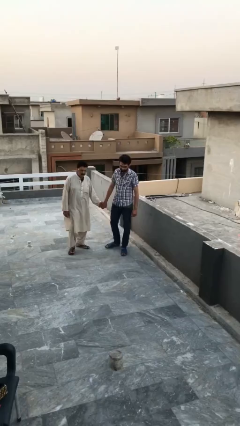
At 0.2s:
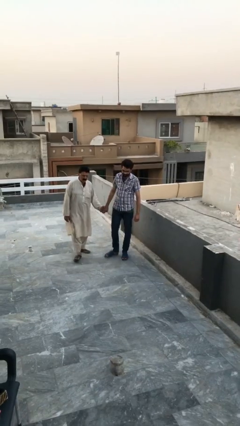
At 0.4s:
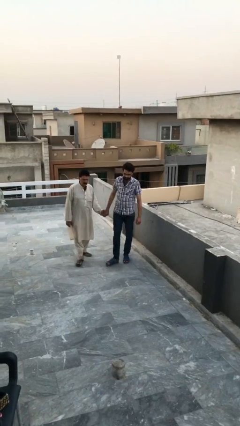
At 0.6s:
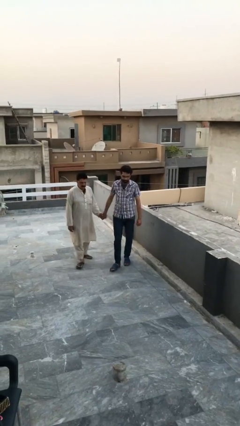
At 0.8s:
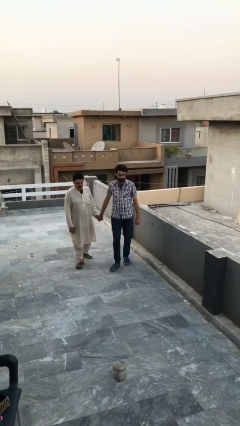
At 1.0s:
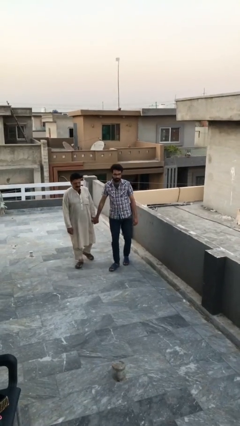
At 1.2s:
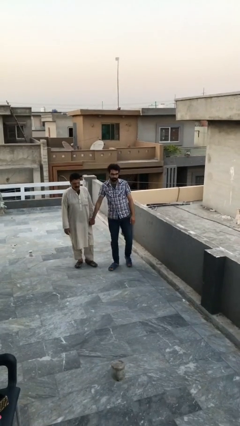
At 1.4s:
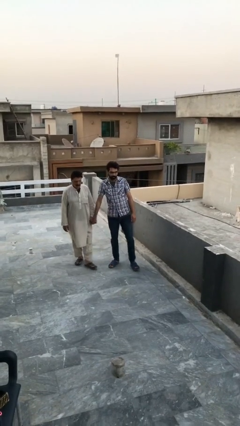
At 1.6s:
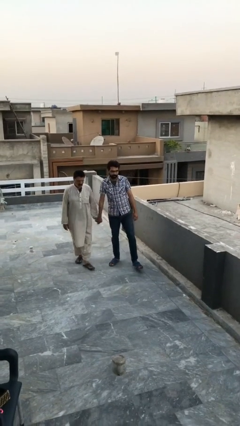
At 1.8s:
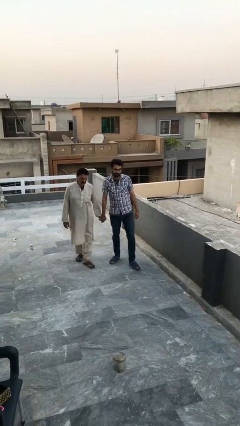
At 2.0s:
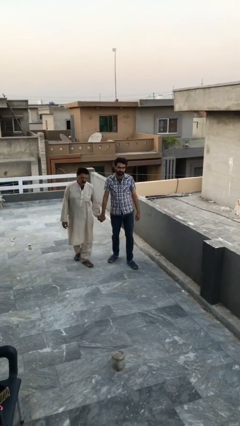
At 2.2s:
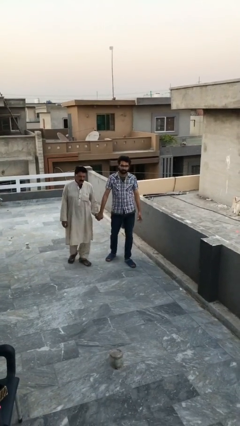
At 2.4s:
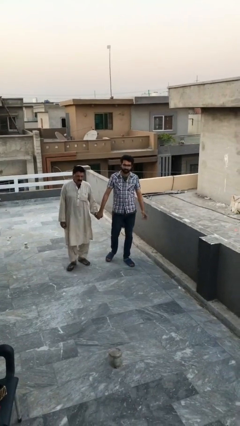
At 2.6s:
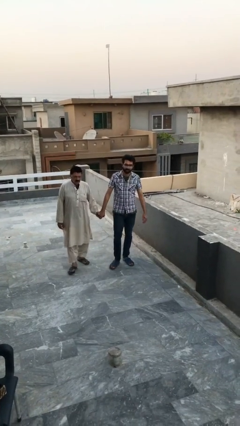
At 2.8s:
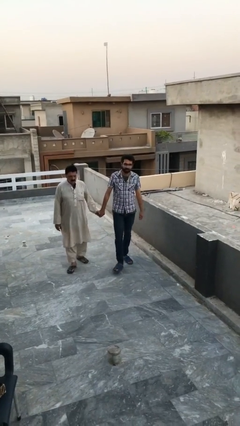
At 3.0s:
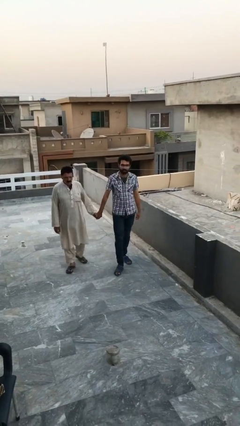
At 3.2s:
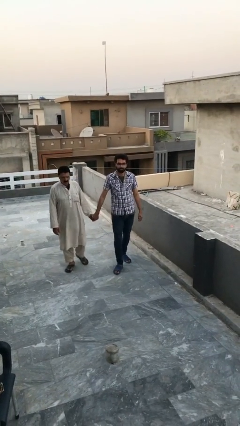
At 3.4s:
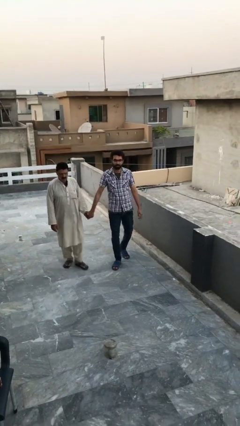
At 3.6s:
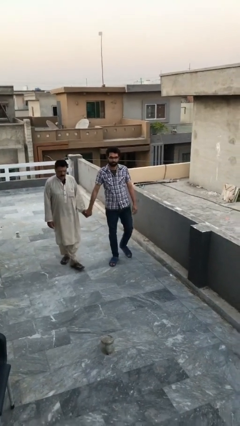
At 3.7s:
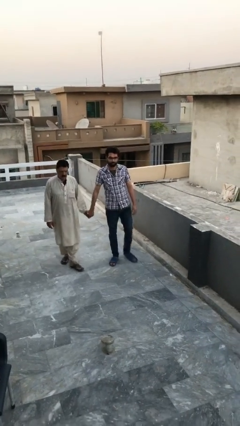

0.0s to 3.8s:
person holds hand

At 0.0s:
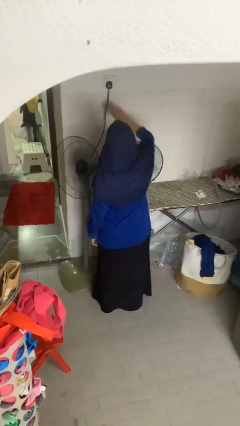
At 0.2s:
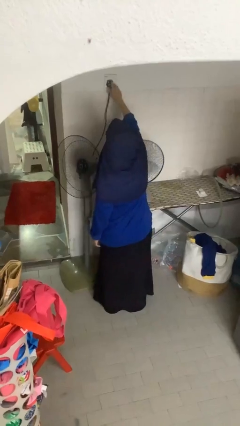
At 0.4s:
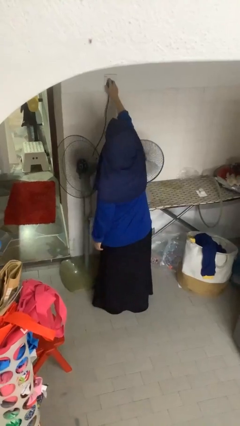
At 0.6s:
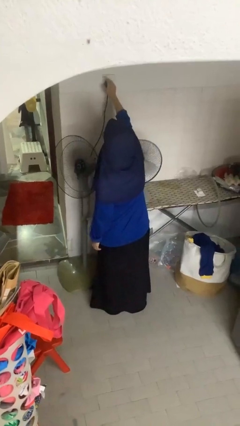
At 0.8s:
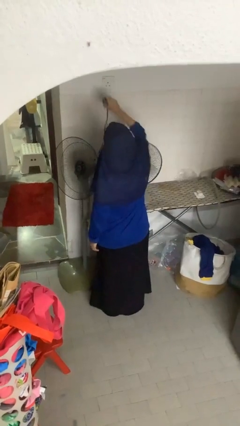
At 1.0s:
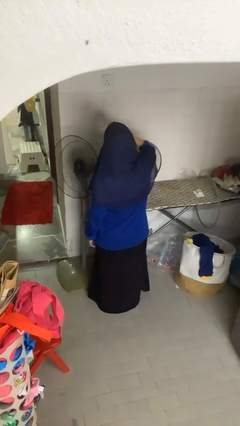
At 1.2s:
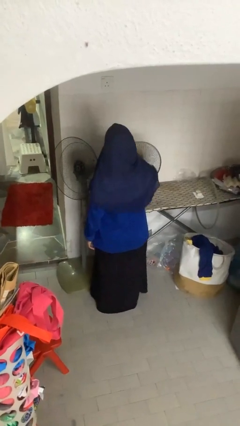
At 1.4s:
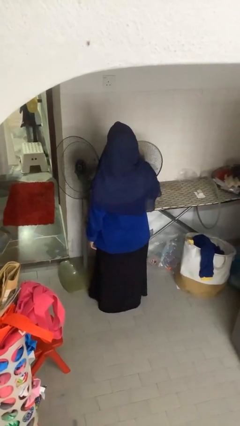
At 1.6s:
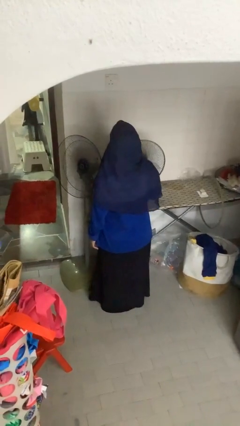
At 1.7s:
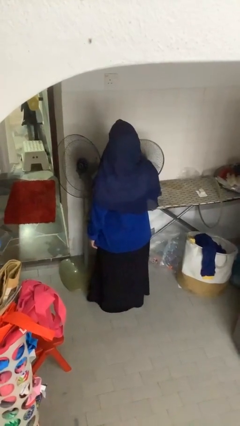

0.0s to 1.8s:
person unplugs from electrical socket

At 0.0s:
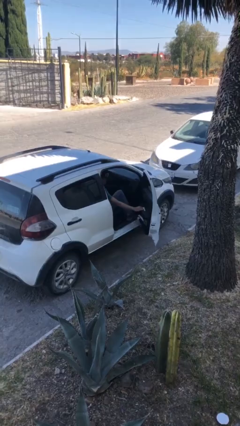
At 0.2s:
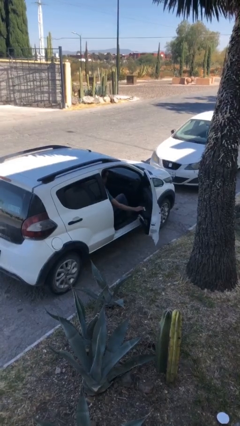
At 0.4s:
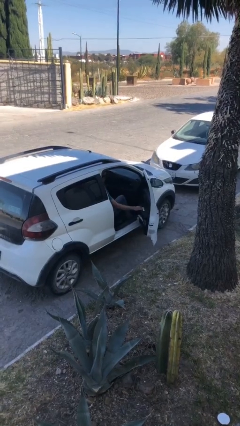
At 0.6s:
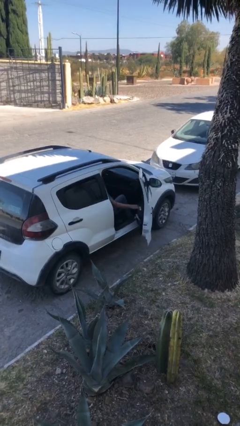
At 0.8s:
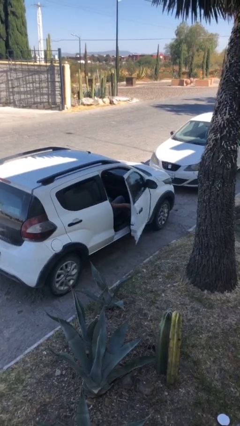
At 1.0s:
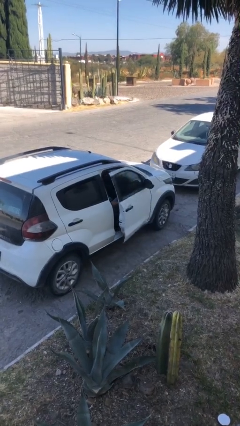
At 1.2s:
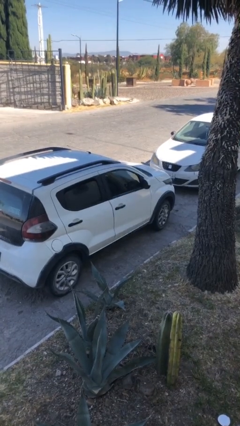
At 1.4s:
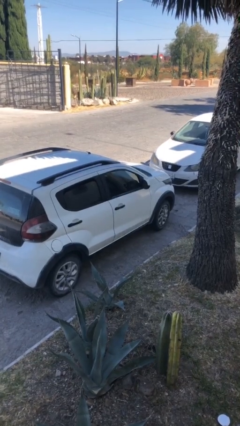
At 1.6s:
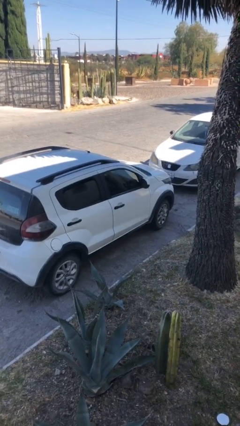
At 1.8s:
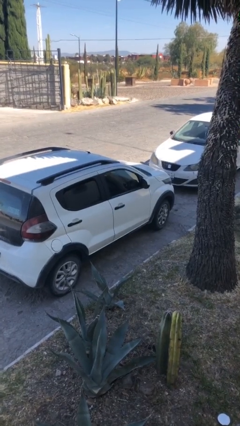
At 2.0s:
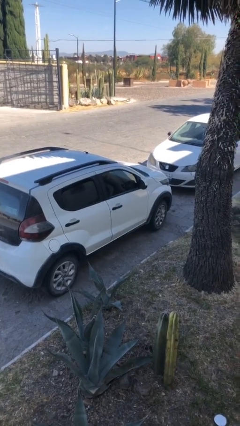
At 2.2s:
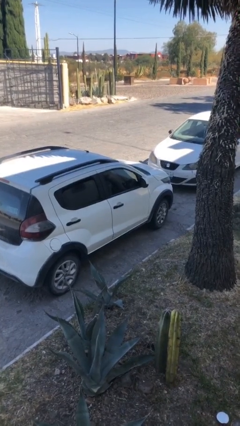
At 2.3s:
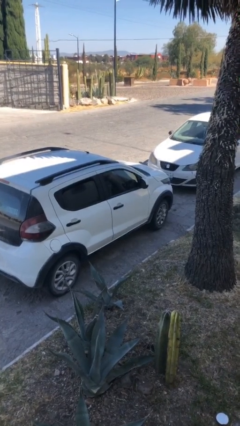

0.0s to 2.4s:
person closes car door

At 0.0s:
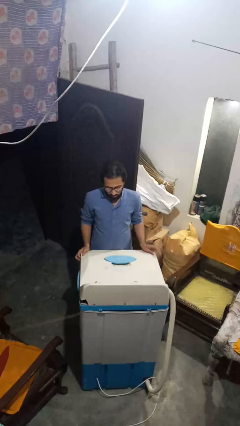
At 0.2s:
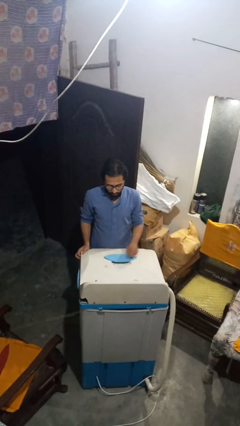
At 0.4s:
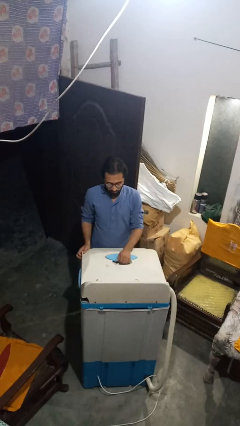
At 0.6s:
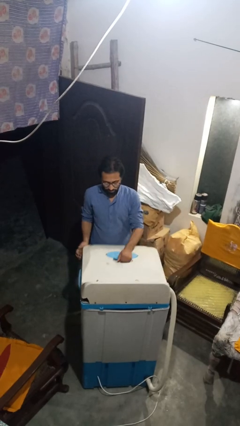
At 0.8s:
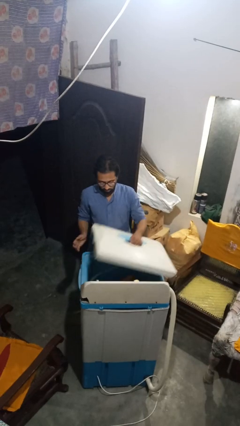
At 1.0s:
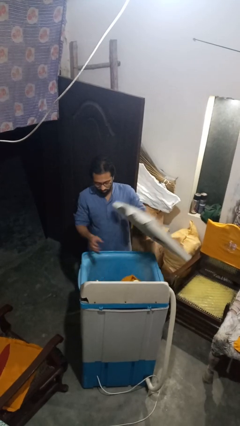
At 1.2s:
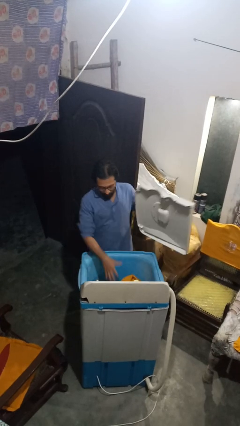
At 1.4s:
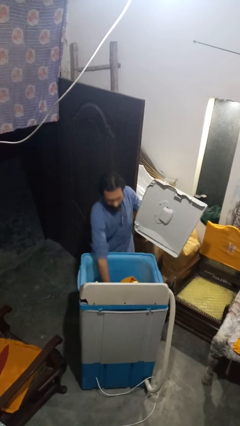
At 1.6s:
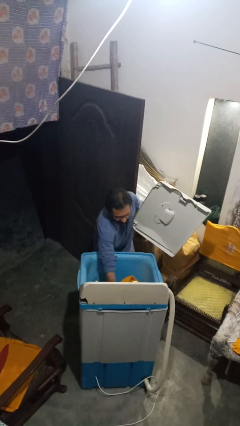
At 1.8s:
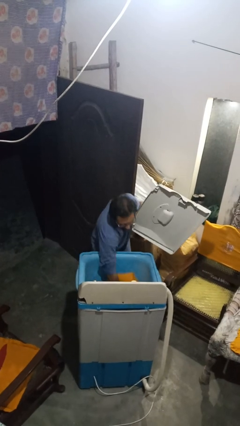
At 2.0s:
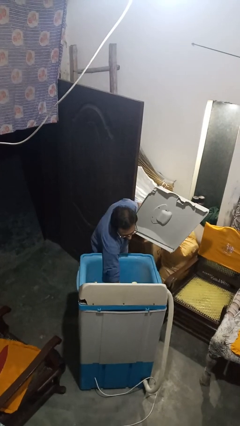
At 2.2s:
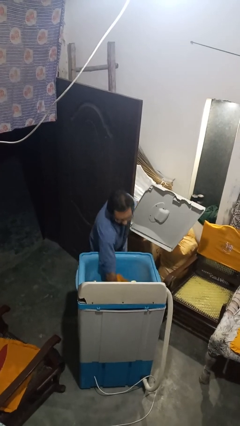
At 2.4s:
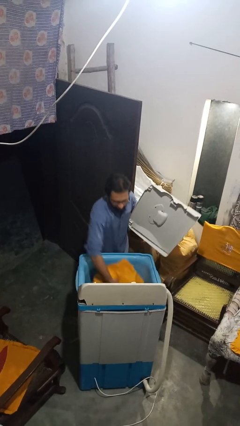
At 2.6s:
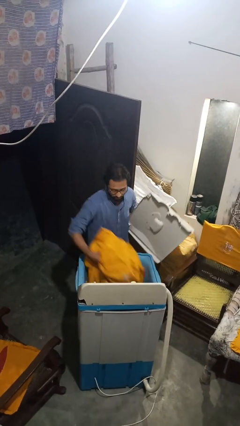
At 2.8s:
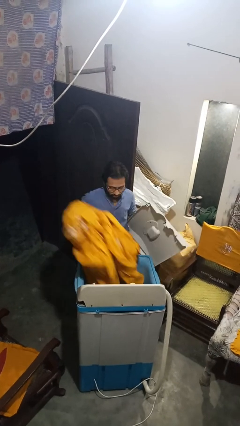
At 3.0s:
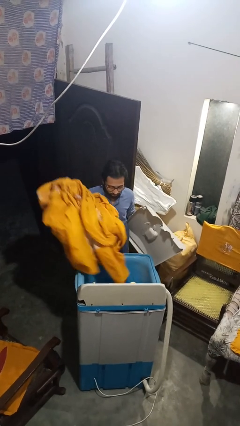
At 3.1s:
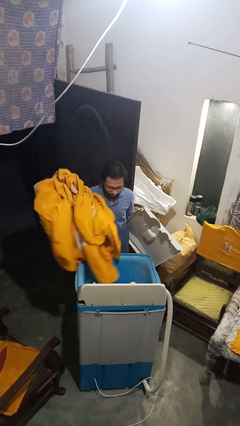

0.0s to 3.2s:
person opens clothes washer

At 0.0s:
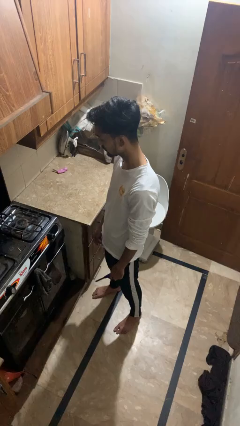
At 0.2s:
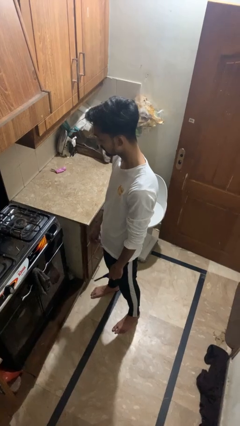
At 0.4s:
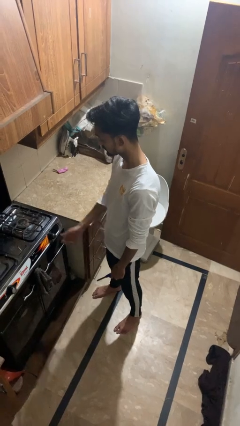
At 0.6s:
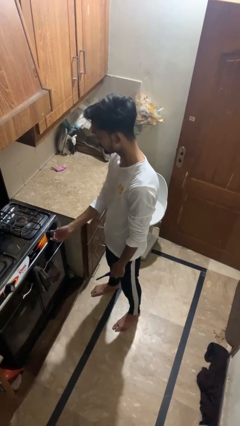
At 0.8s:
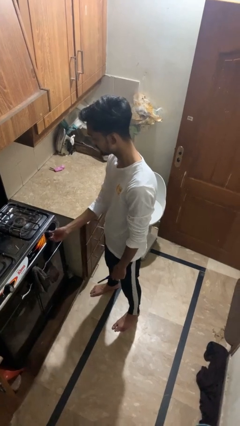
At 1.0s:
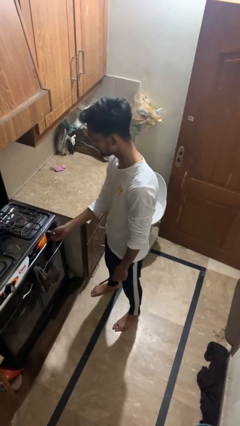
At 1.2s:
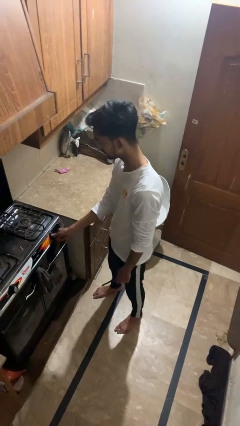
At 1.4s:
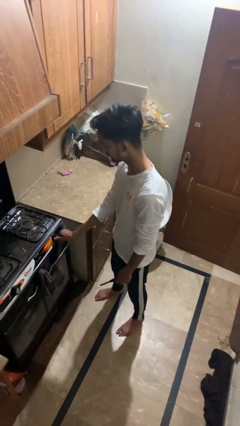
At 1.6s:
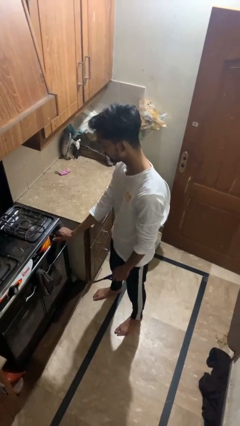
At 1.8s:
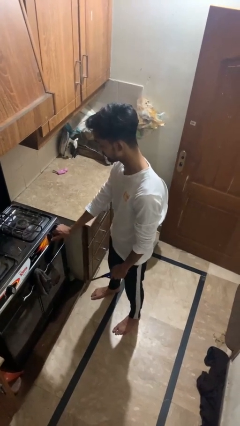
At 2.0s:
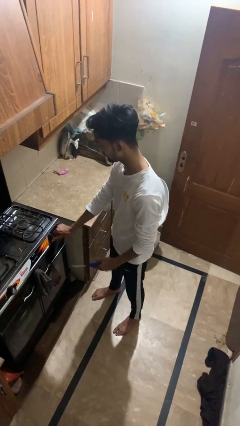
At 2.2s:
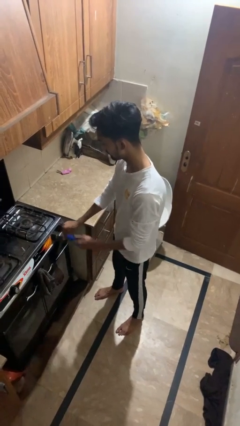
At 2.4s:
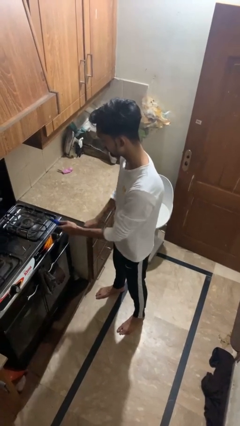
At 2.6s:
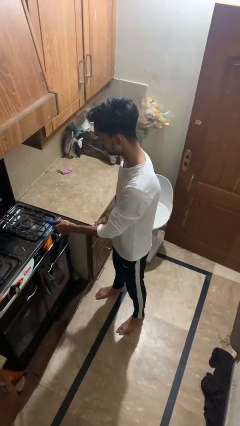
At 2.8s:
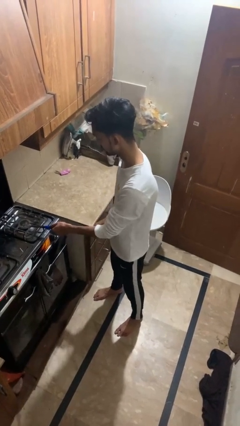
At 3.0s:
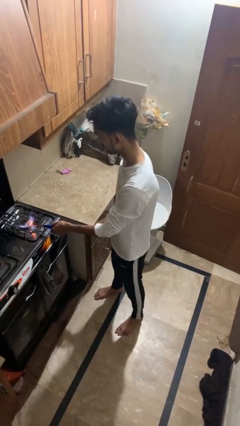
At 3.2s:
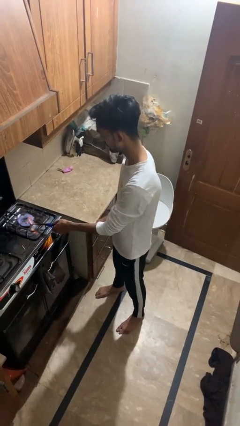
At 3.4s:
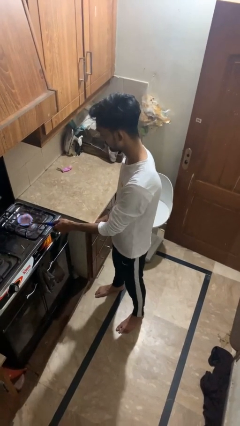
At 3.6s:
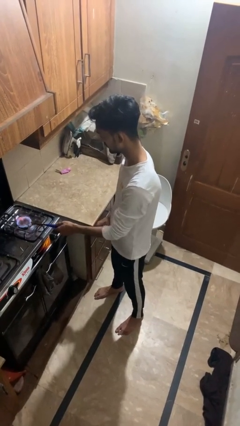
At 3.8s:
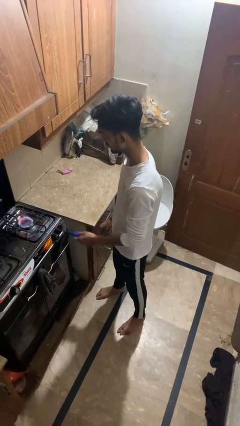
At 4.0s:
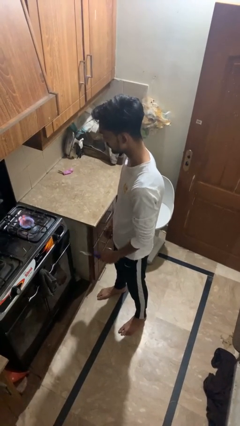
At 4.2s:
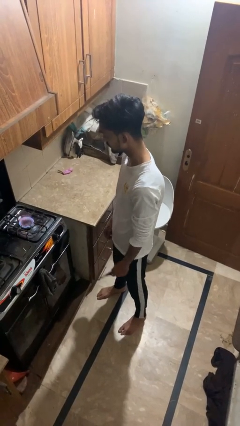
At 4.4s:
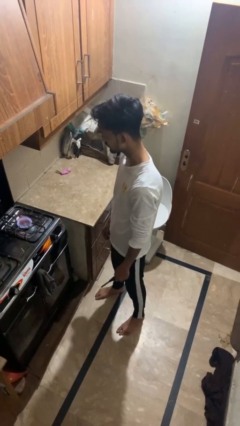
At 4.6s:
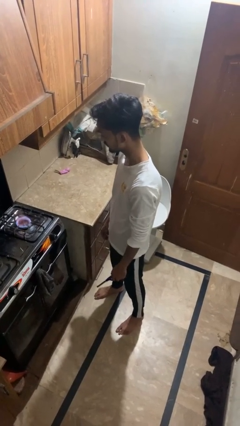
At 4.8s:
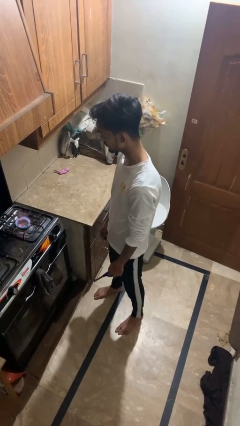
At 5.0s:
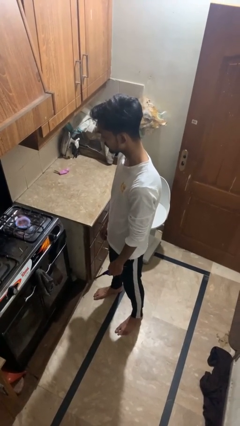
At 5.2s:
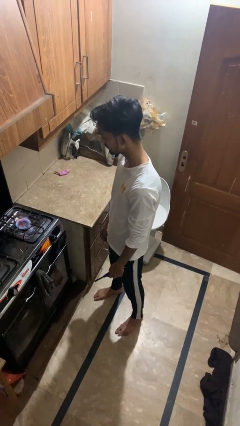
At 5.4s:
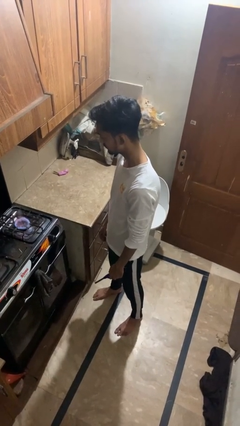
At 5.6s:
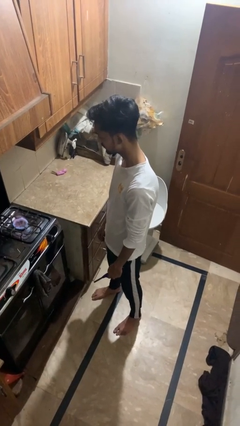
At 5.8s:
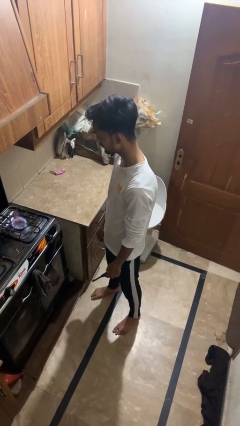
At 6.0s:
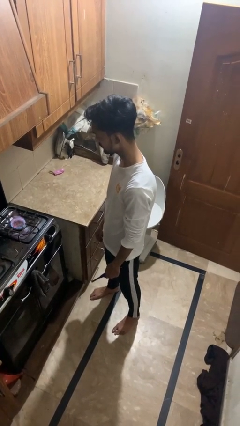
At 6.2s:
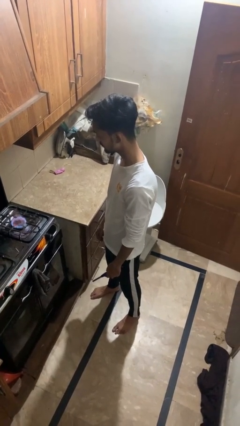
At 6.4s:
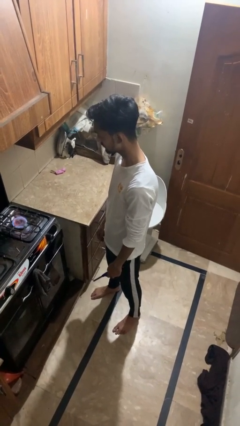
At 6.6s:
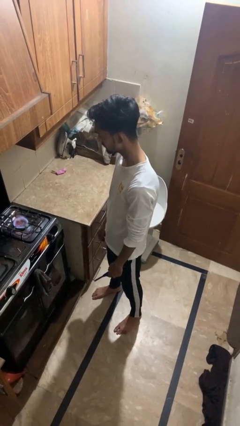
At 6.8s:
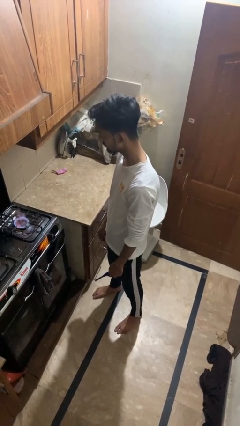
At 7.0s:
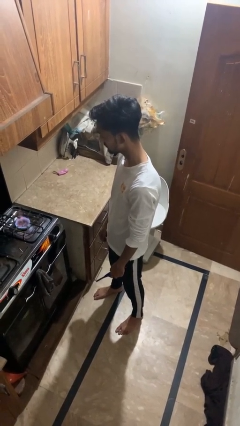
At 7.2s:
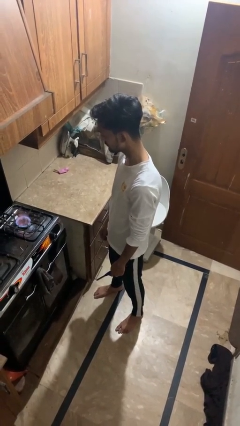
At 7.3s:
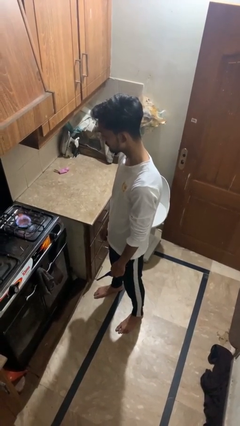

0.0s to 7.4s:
person turns on stovetop
